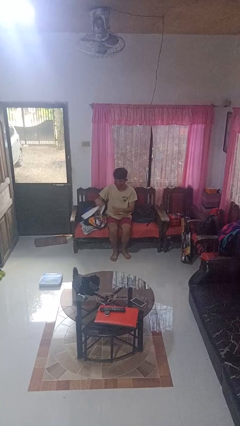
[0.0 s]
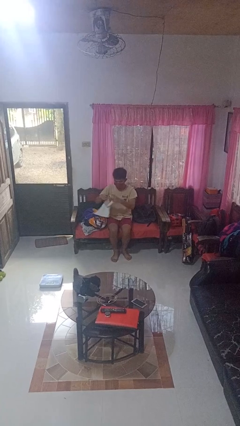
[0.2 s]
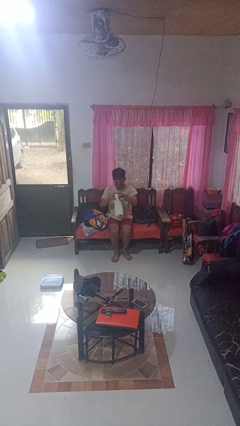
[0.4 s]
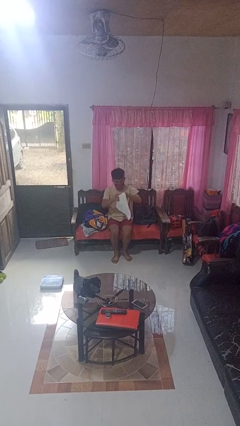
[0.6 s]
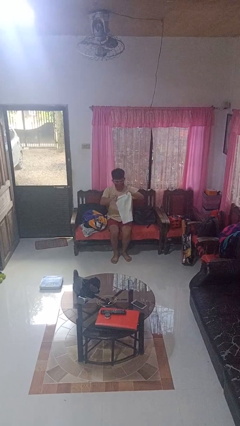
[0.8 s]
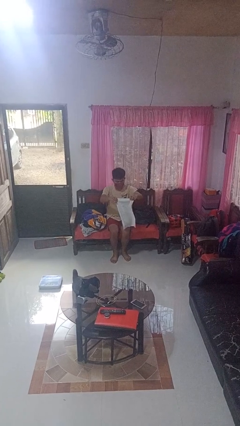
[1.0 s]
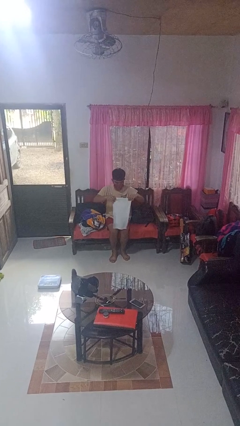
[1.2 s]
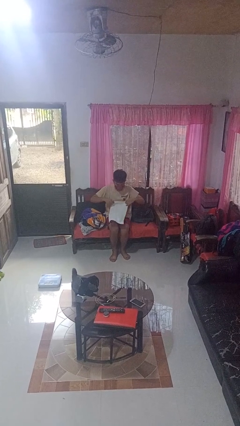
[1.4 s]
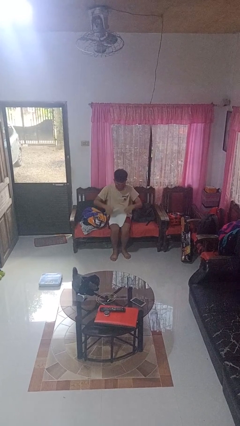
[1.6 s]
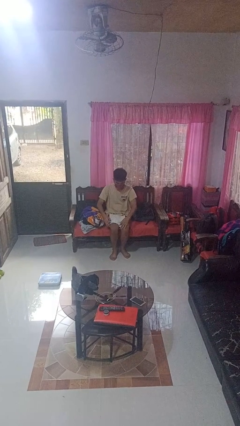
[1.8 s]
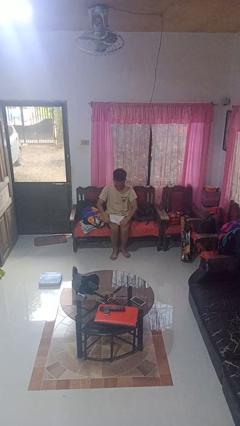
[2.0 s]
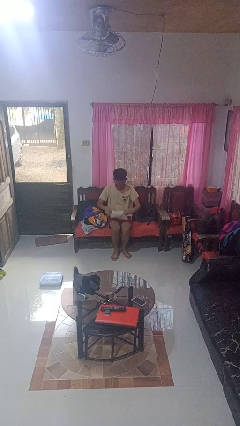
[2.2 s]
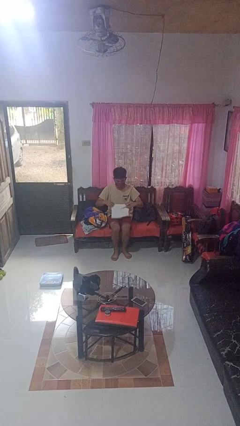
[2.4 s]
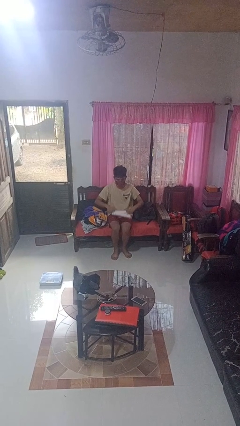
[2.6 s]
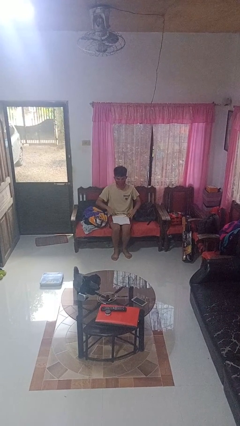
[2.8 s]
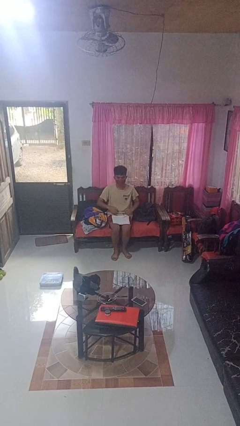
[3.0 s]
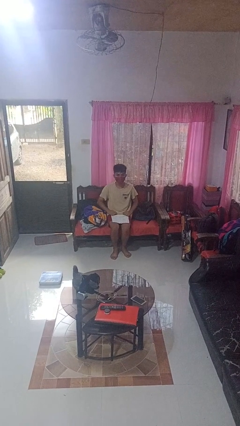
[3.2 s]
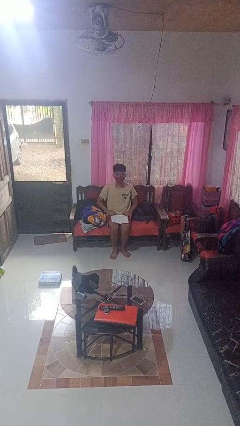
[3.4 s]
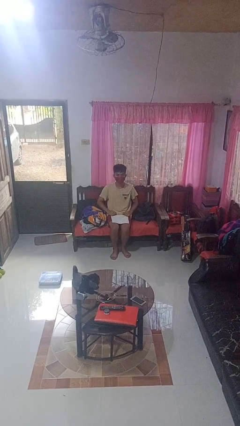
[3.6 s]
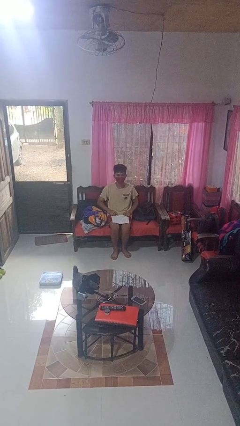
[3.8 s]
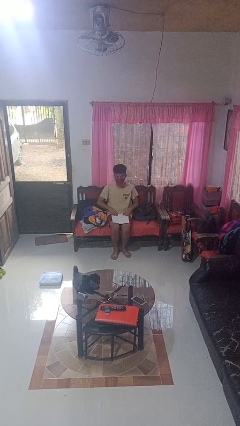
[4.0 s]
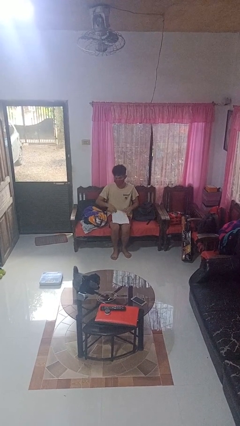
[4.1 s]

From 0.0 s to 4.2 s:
person folds towel

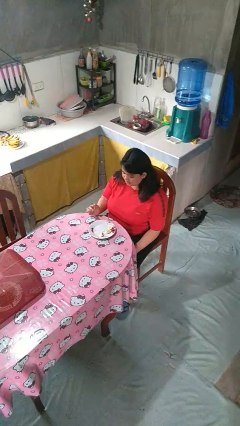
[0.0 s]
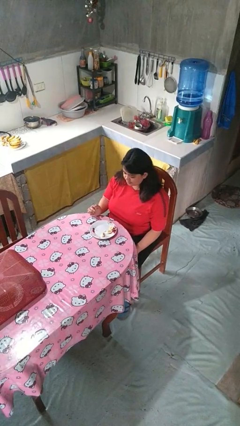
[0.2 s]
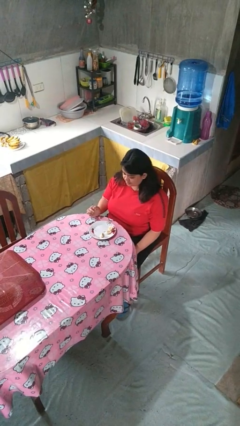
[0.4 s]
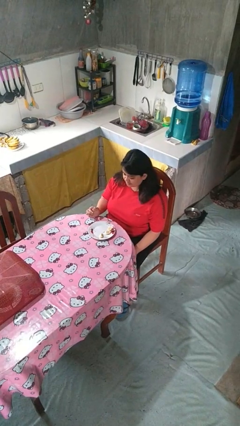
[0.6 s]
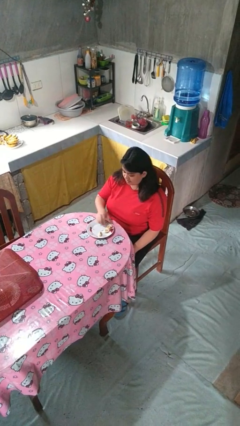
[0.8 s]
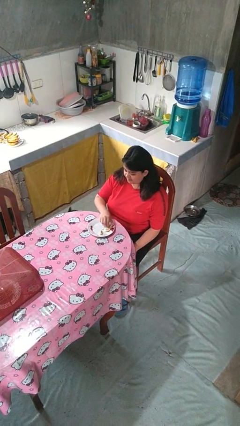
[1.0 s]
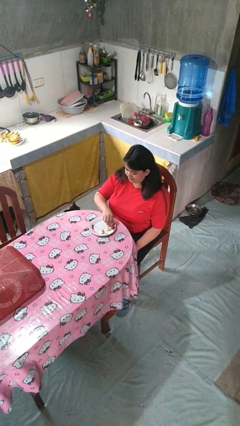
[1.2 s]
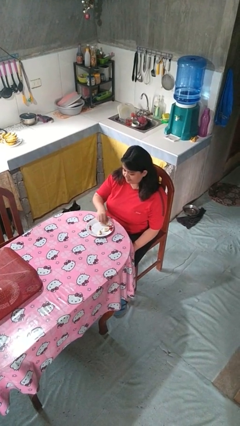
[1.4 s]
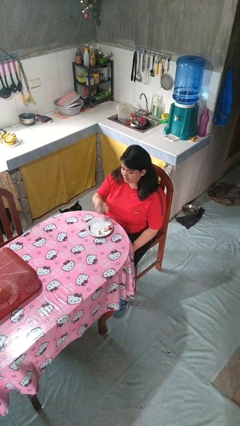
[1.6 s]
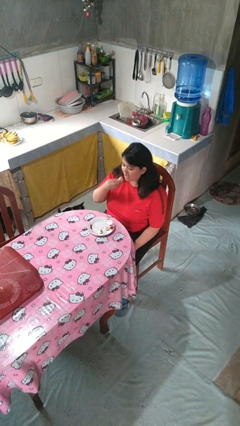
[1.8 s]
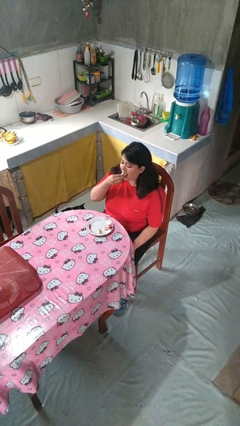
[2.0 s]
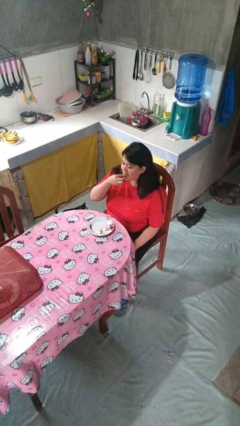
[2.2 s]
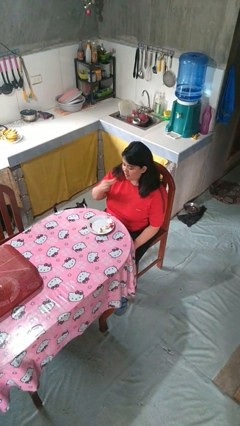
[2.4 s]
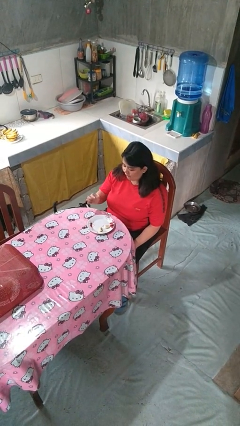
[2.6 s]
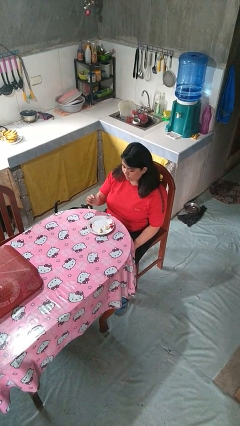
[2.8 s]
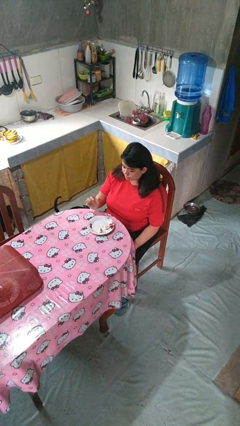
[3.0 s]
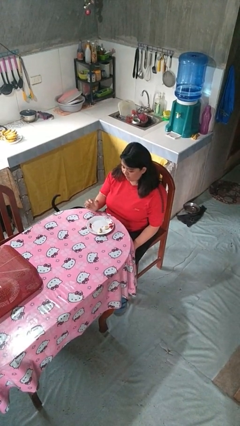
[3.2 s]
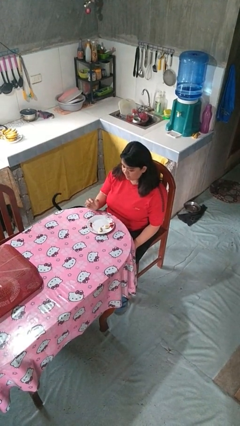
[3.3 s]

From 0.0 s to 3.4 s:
person eats with hands

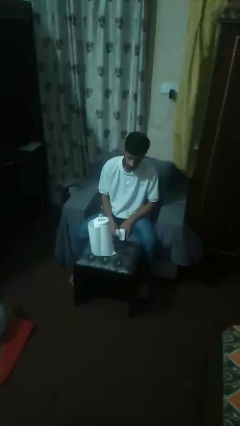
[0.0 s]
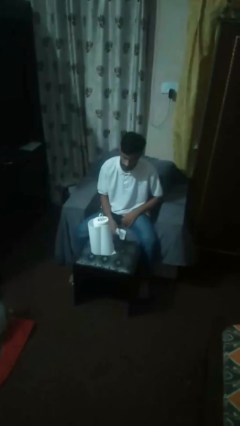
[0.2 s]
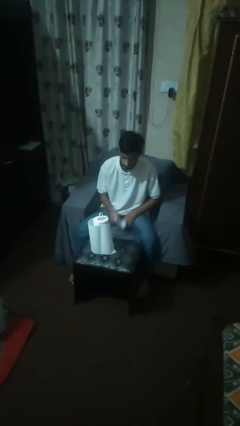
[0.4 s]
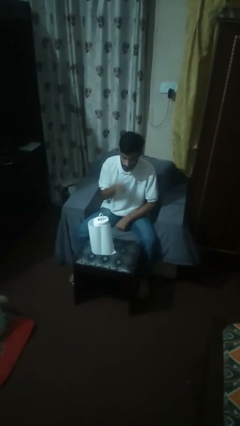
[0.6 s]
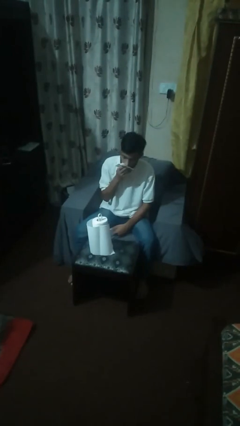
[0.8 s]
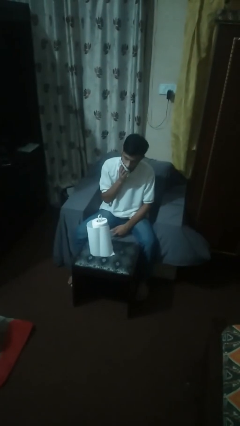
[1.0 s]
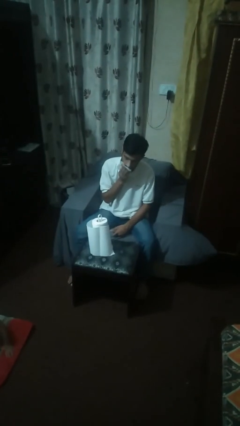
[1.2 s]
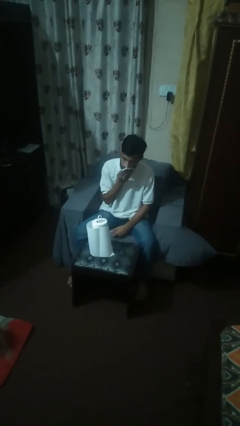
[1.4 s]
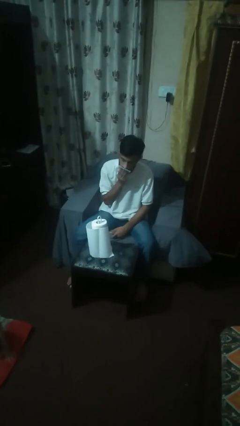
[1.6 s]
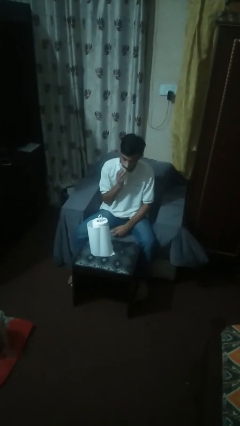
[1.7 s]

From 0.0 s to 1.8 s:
person wipes mouth with napkin

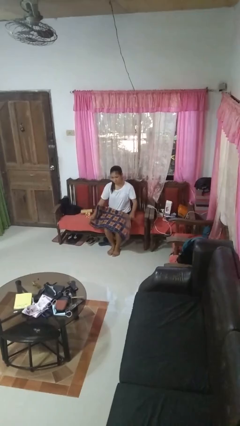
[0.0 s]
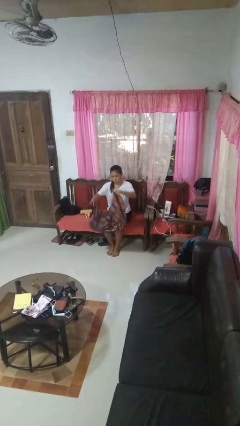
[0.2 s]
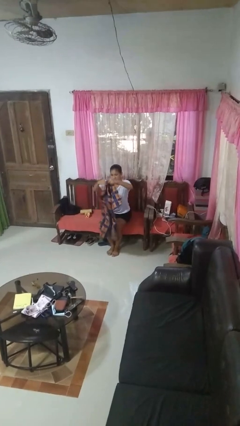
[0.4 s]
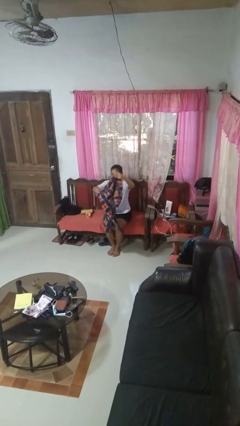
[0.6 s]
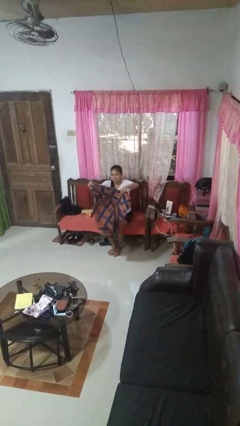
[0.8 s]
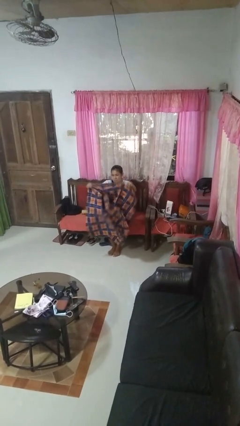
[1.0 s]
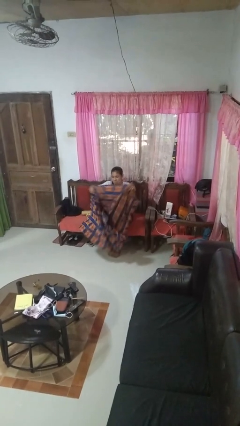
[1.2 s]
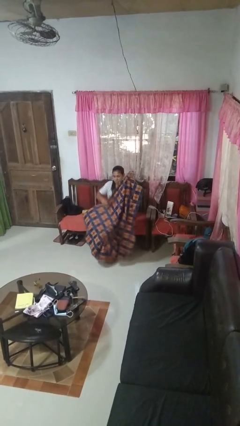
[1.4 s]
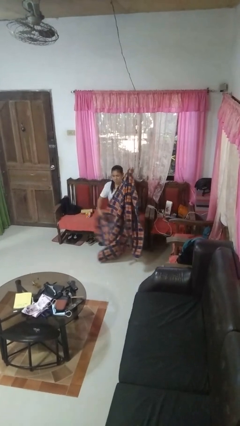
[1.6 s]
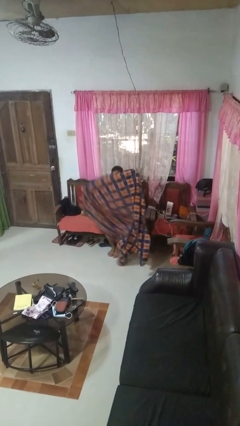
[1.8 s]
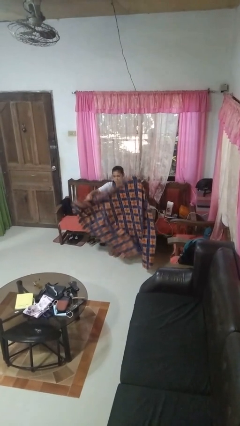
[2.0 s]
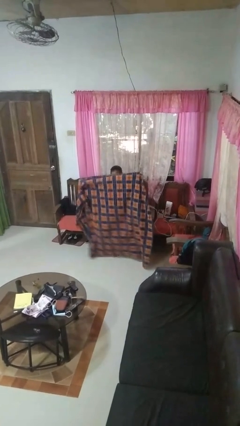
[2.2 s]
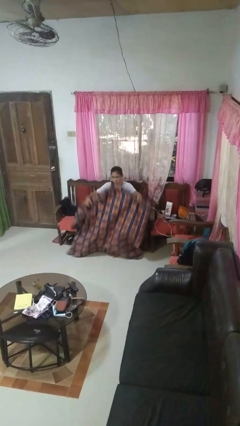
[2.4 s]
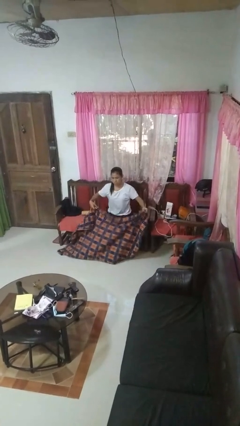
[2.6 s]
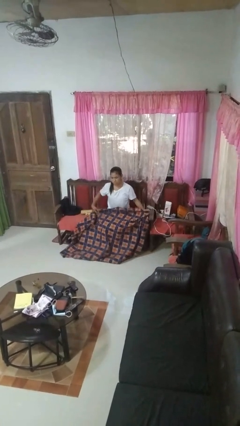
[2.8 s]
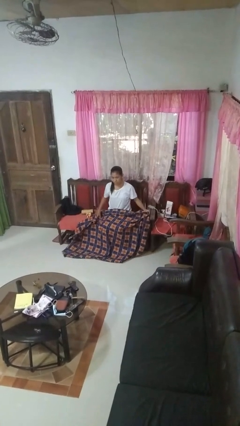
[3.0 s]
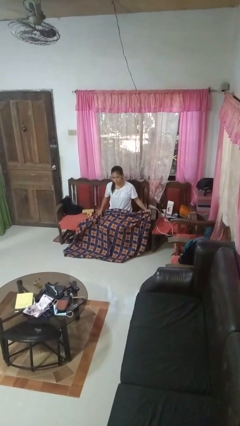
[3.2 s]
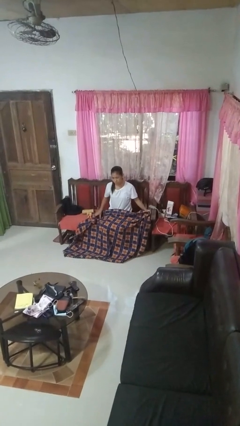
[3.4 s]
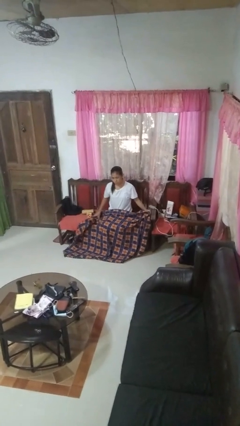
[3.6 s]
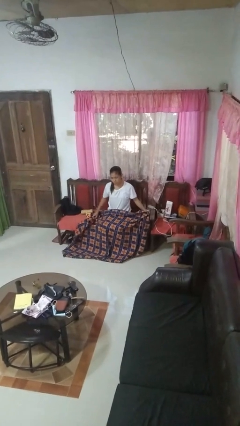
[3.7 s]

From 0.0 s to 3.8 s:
person unfolds blanket

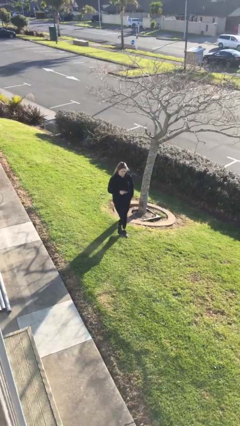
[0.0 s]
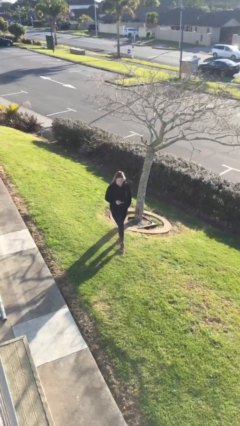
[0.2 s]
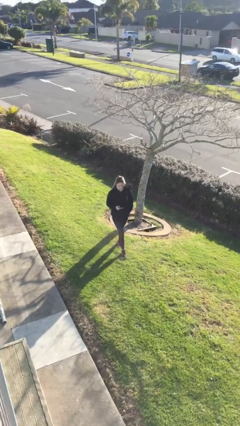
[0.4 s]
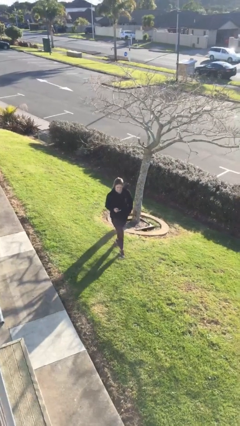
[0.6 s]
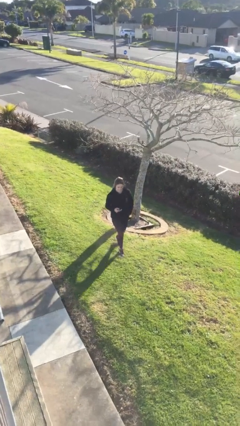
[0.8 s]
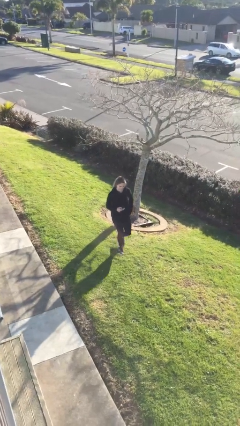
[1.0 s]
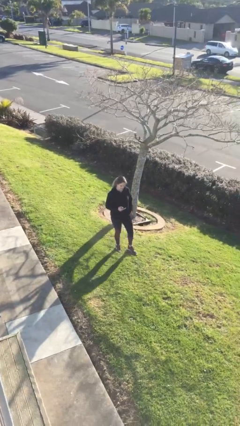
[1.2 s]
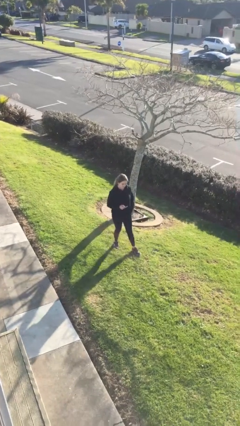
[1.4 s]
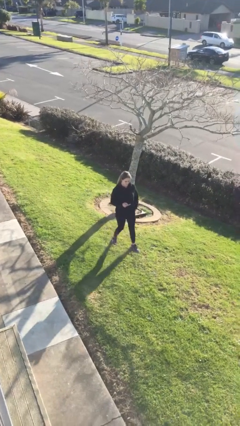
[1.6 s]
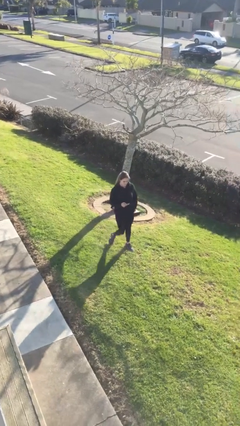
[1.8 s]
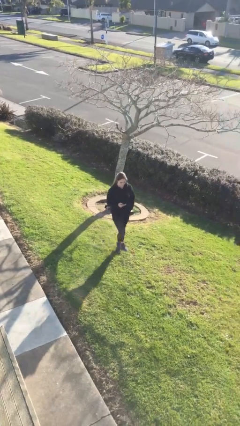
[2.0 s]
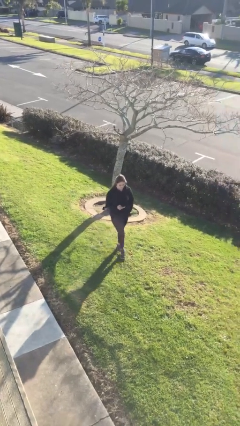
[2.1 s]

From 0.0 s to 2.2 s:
person texts on phone

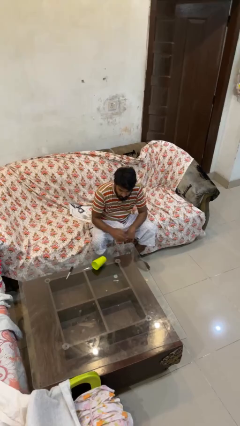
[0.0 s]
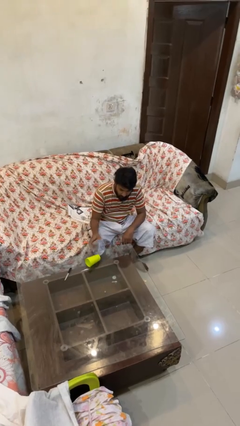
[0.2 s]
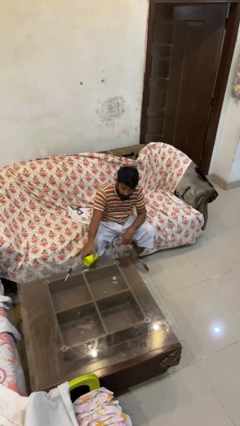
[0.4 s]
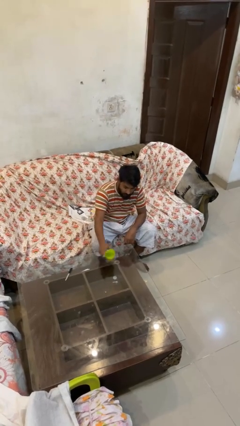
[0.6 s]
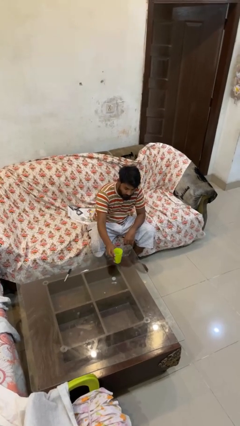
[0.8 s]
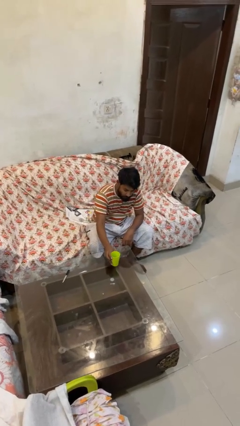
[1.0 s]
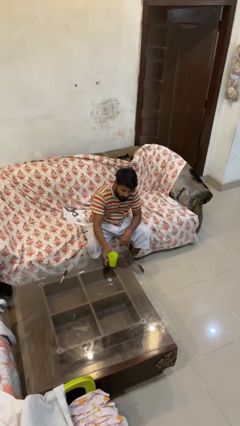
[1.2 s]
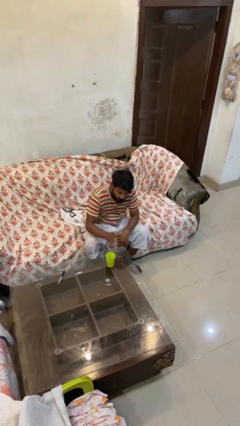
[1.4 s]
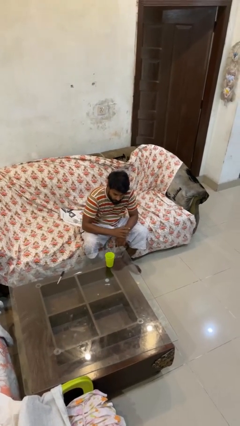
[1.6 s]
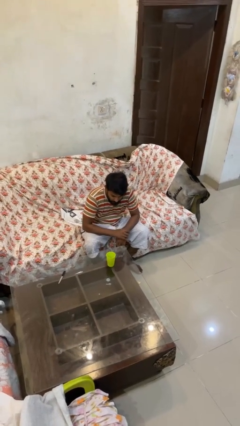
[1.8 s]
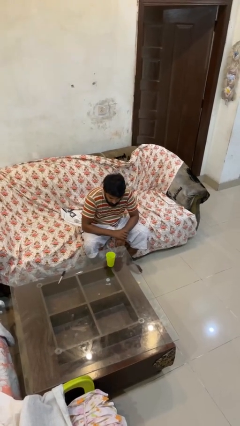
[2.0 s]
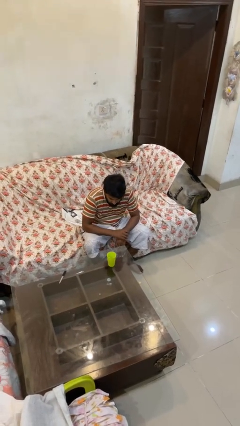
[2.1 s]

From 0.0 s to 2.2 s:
person sets upright glass
